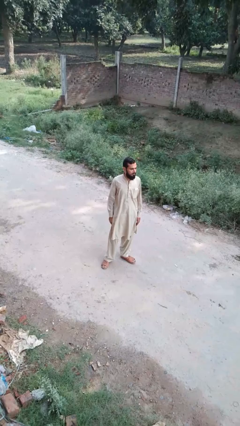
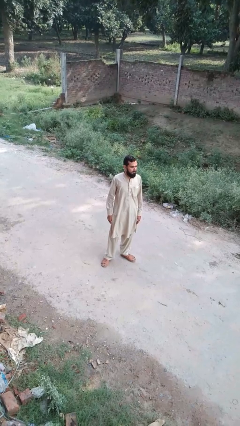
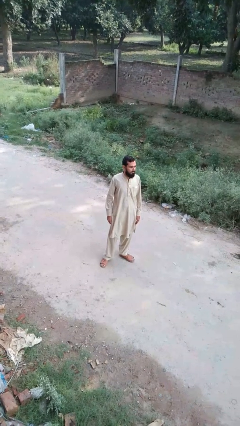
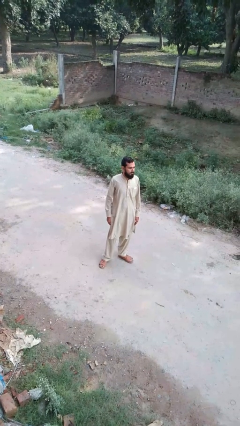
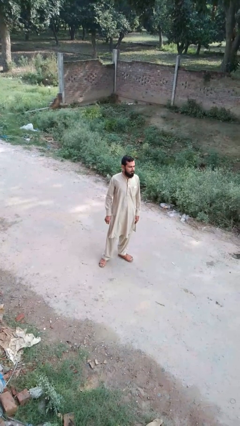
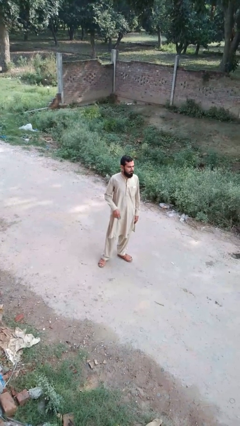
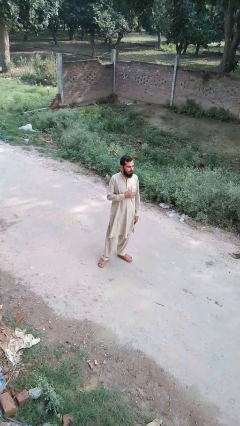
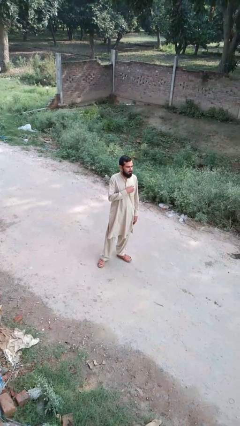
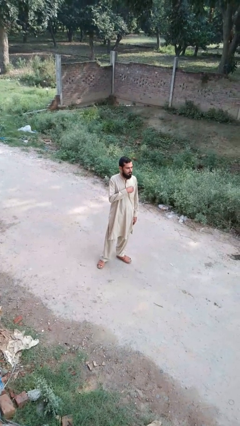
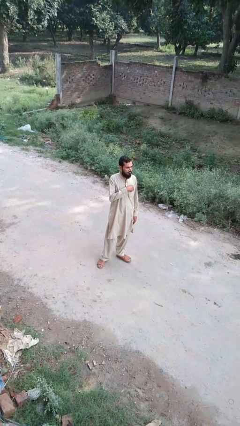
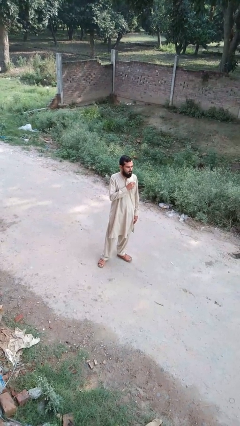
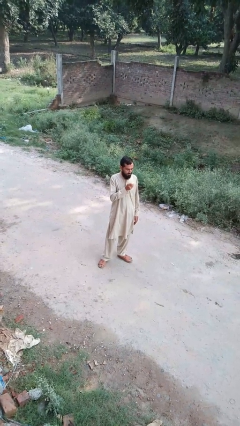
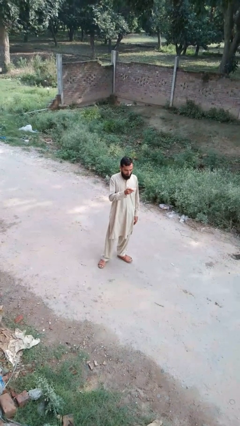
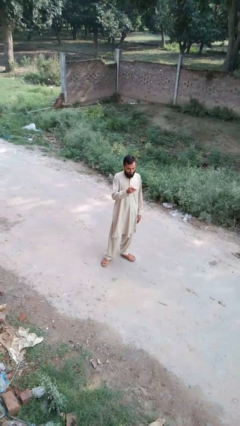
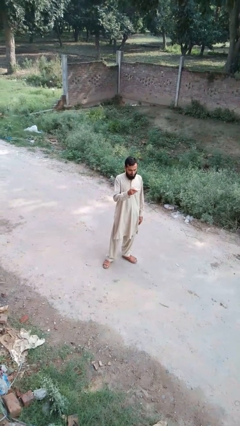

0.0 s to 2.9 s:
person takes phone from pocket

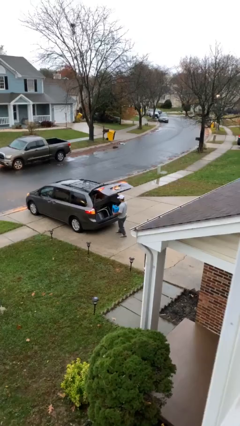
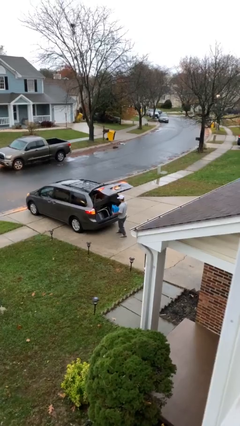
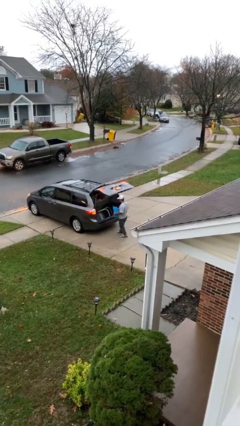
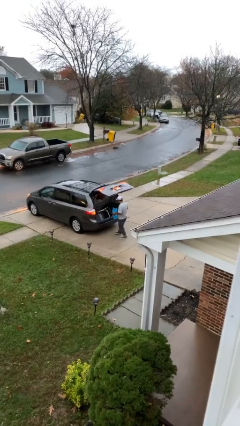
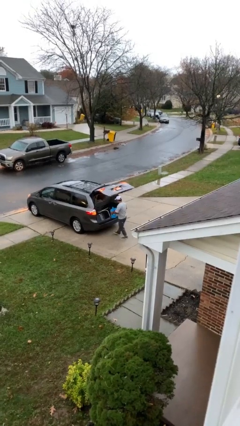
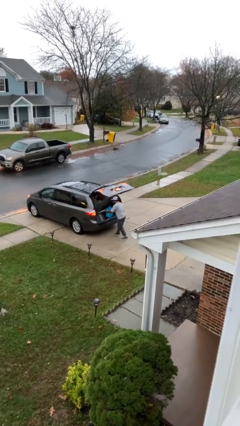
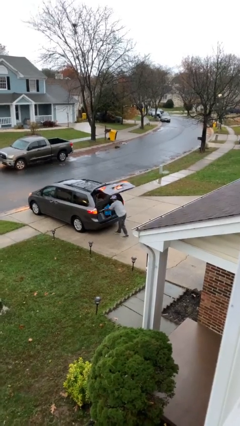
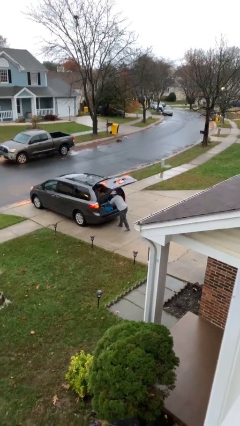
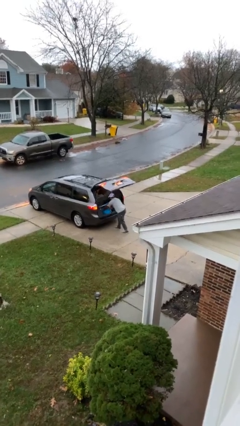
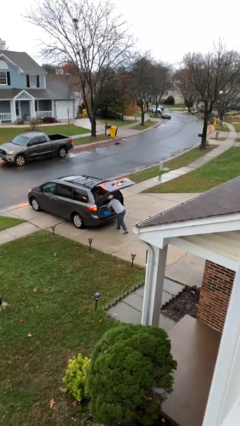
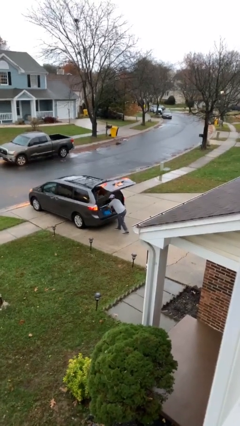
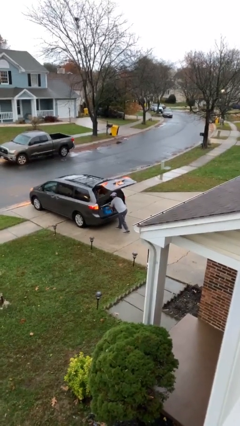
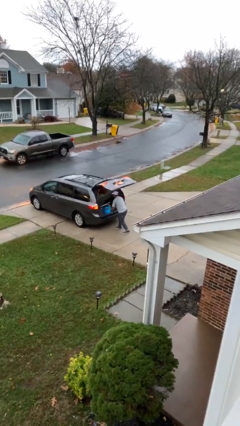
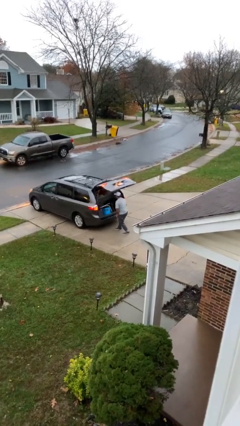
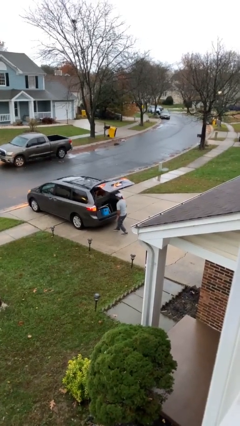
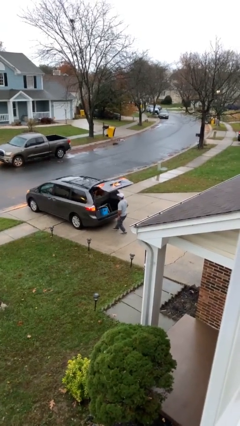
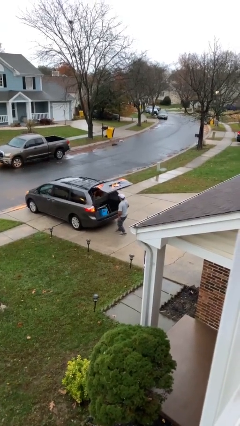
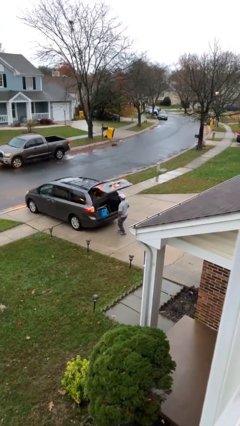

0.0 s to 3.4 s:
person loads car

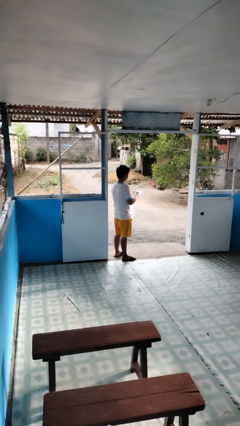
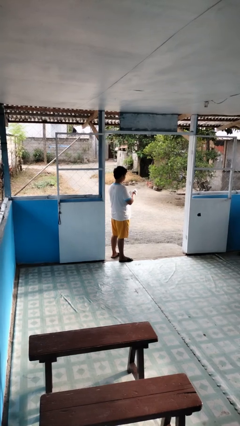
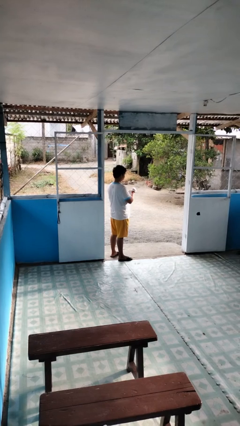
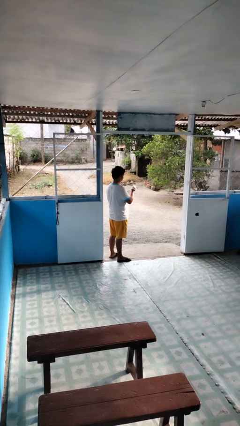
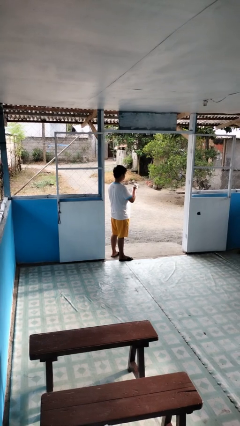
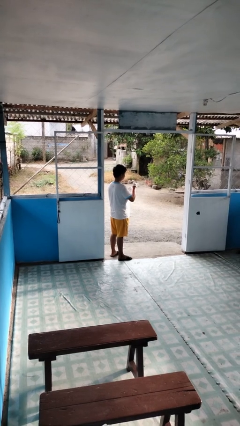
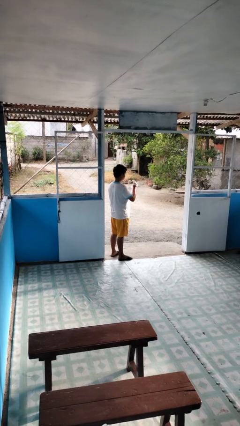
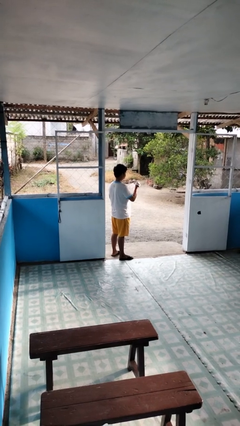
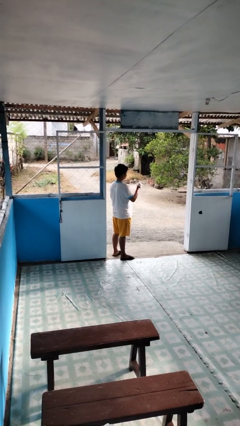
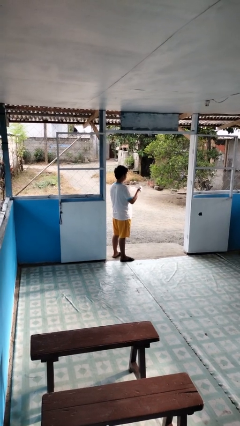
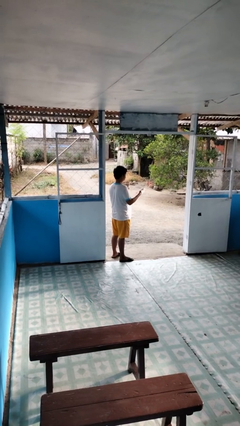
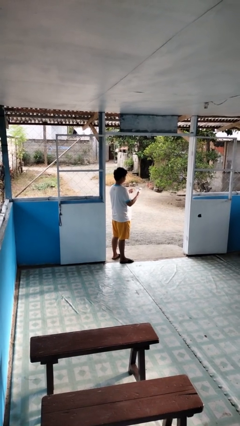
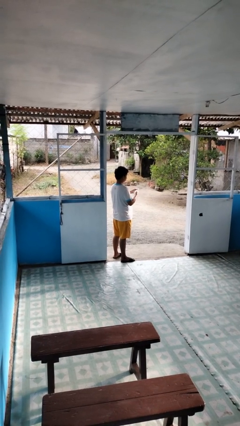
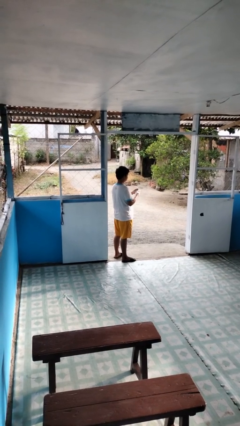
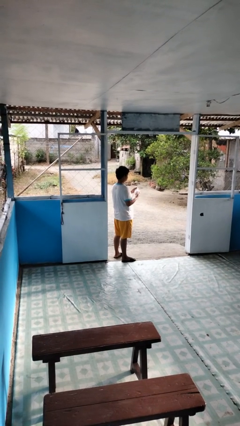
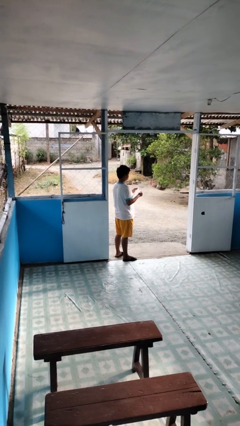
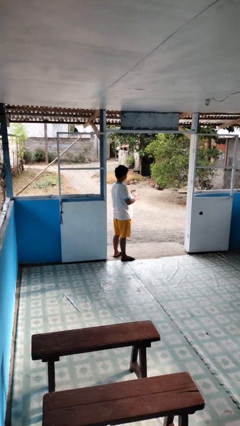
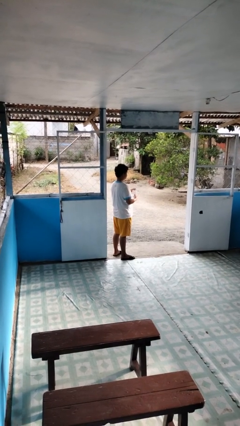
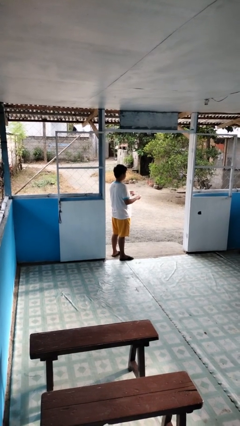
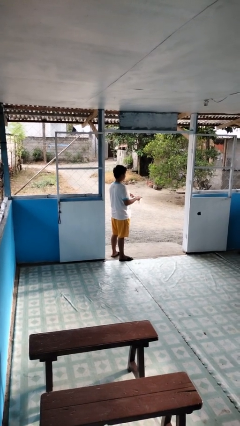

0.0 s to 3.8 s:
person takes off gloves

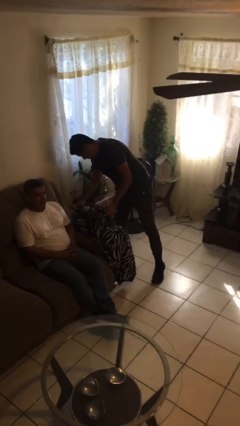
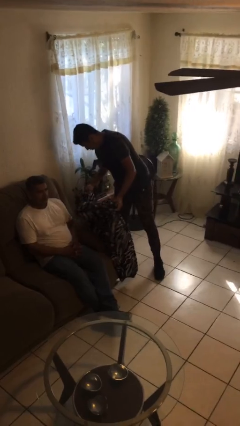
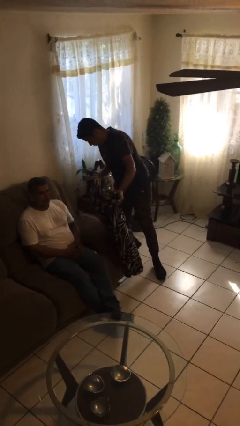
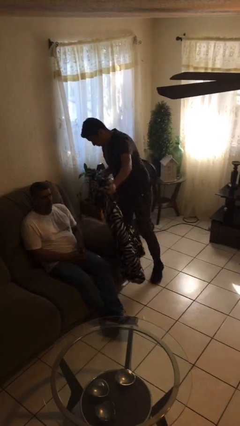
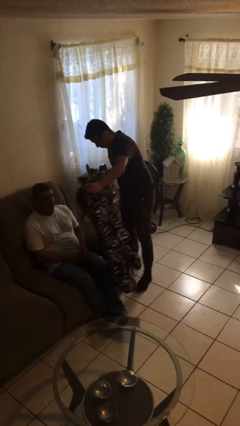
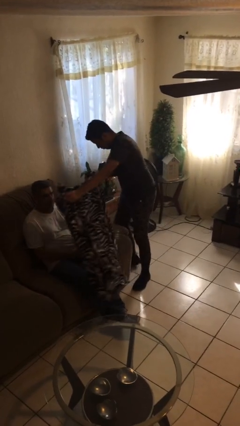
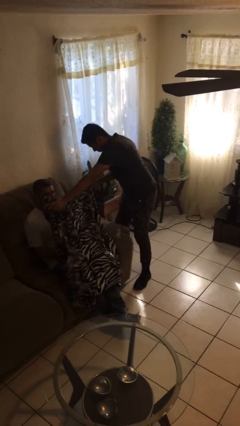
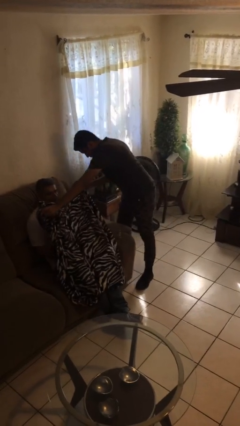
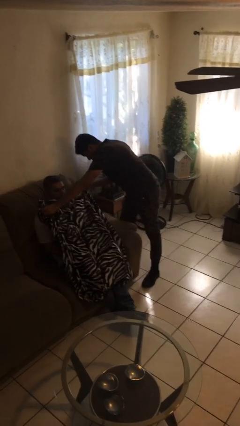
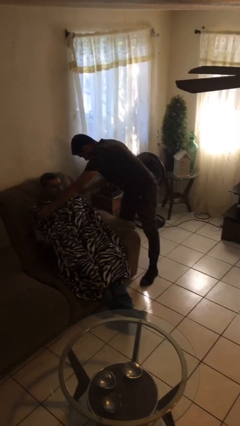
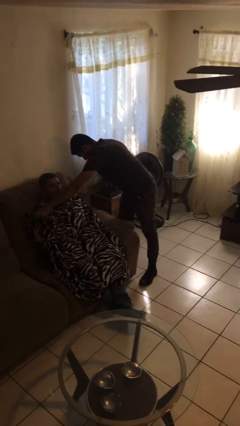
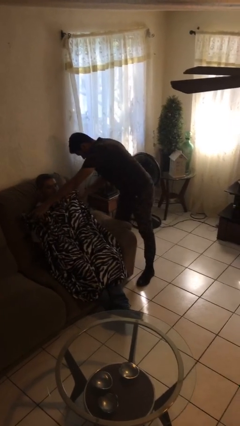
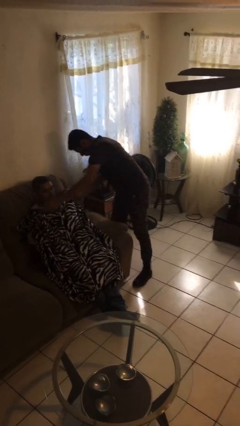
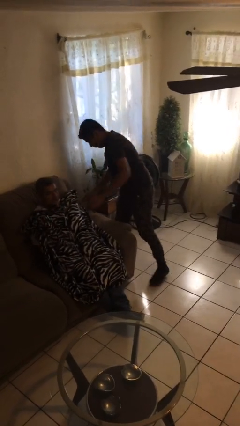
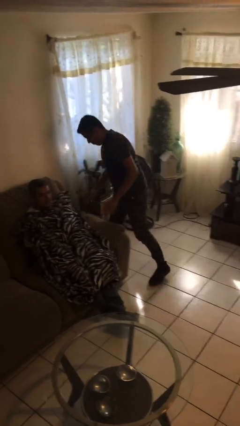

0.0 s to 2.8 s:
person covers friend with blanket

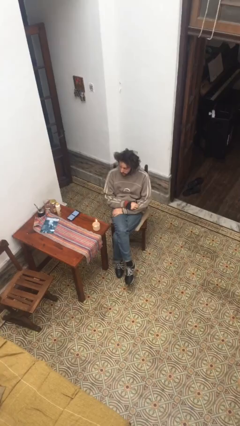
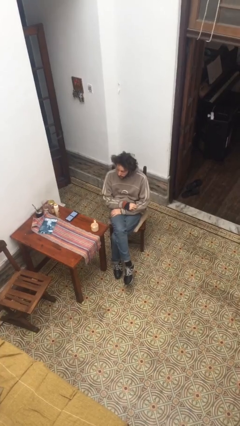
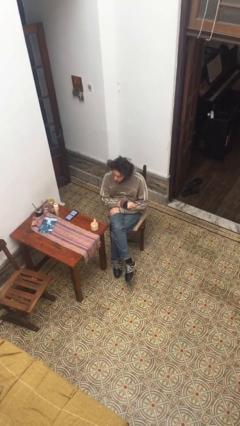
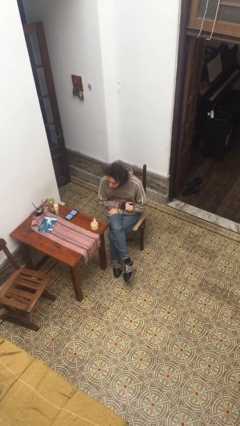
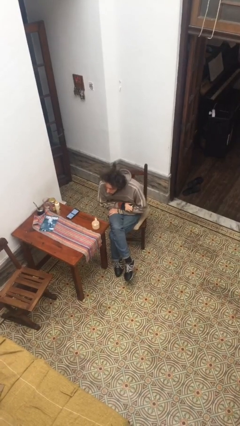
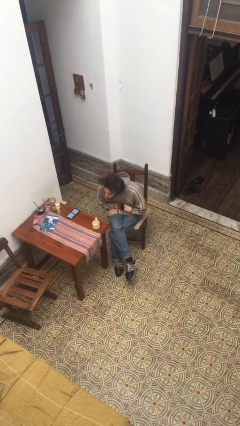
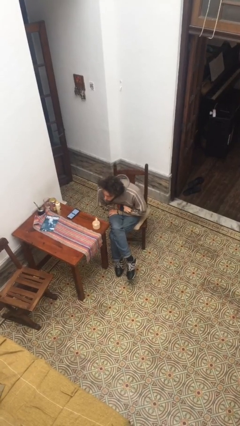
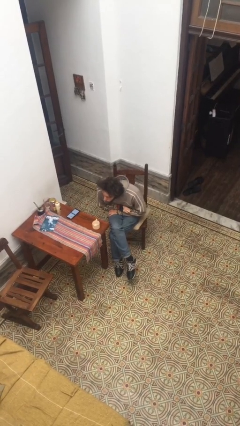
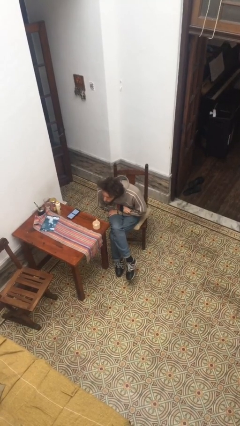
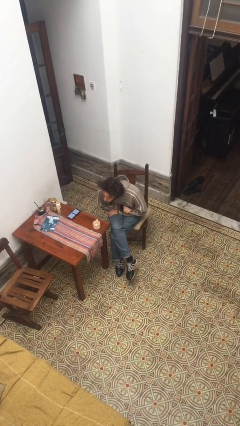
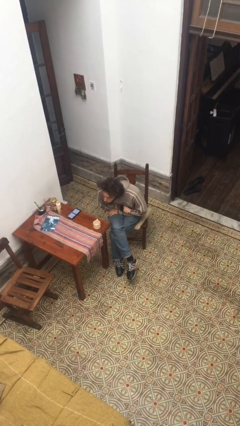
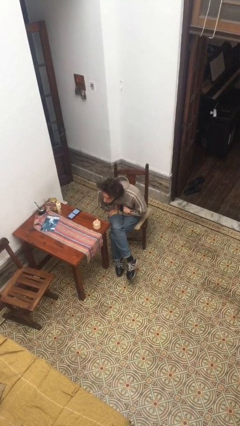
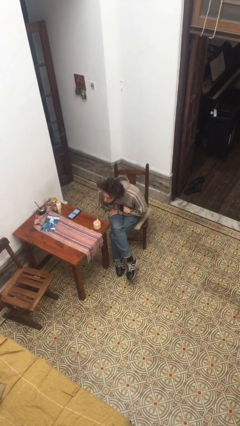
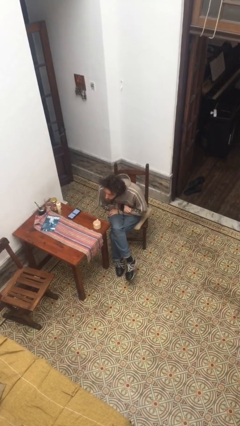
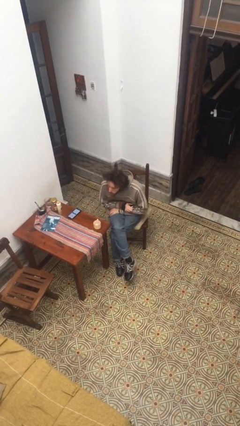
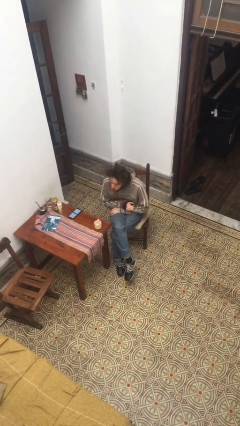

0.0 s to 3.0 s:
person extinguishes candle

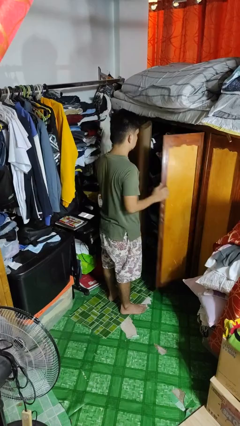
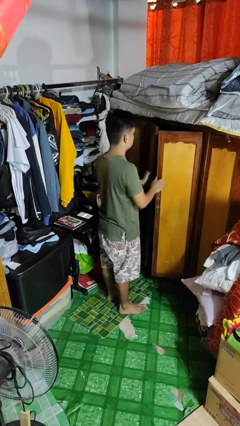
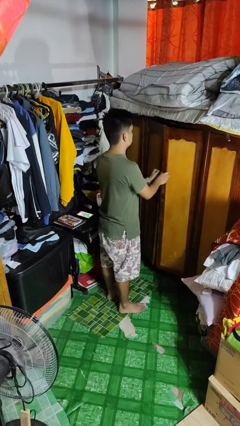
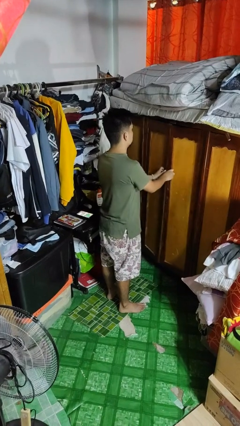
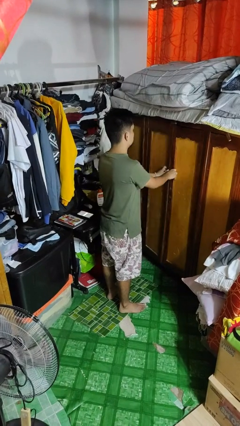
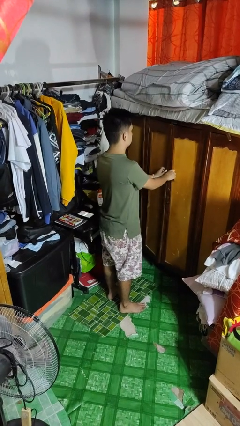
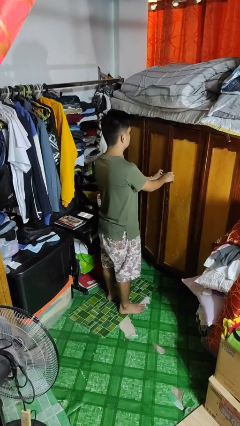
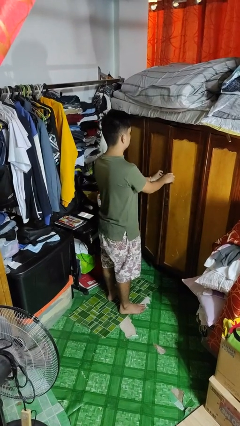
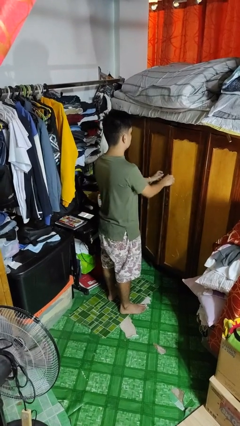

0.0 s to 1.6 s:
person closes closet door

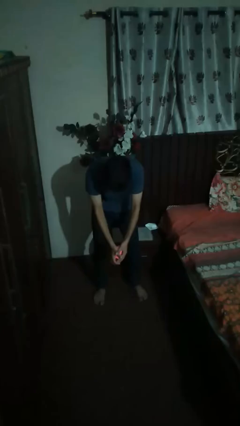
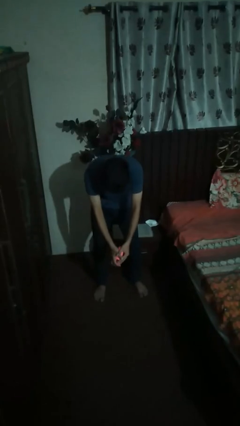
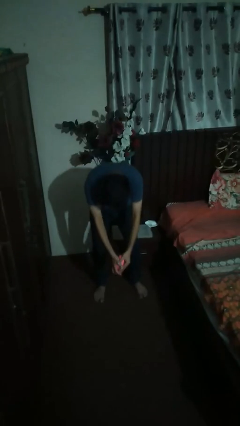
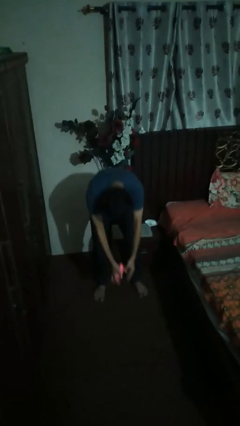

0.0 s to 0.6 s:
person catches dropped object
